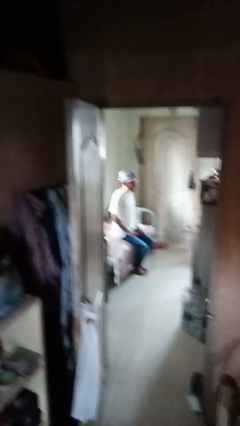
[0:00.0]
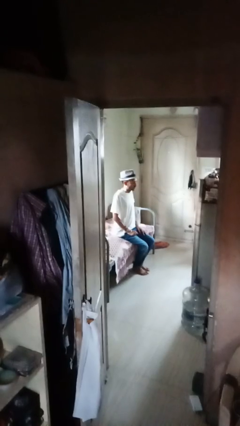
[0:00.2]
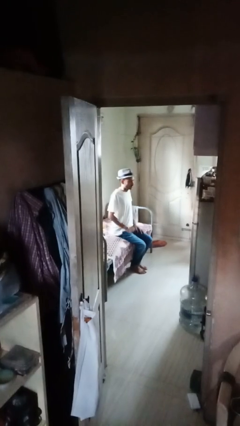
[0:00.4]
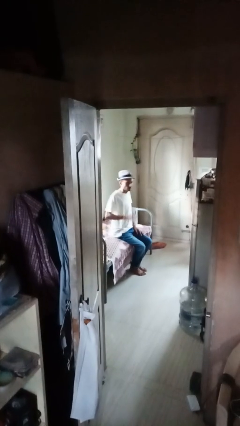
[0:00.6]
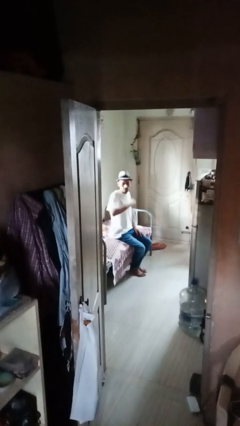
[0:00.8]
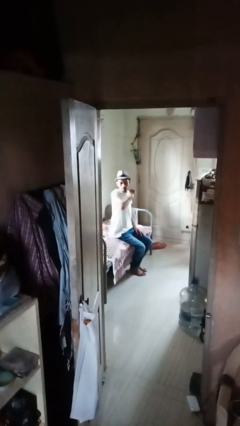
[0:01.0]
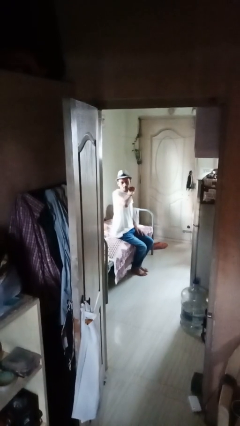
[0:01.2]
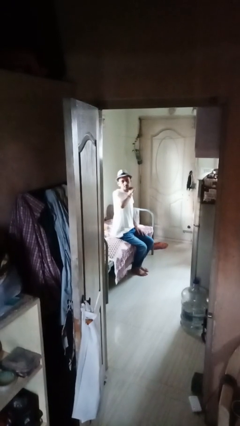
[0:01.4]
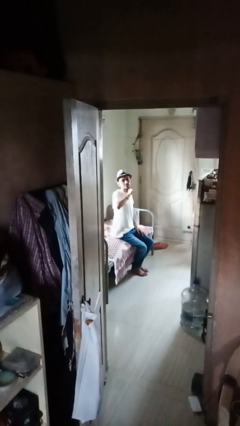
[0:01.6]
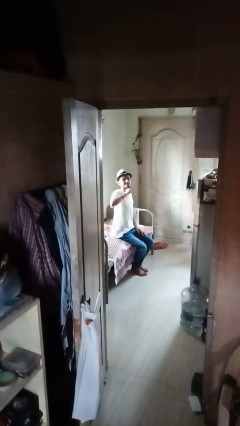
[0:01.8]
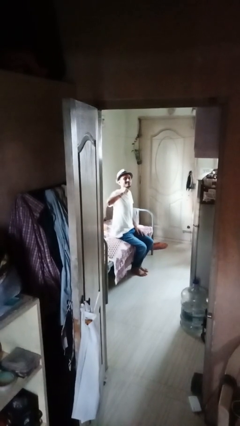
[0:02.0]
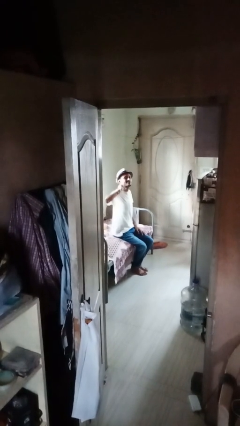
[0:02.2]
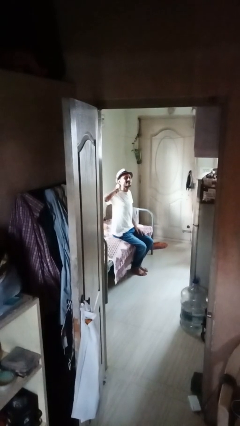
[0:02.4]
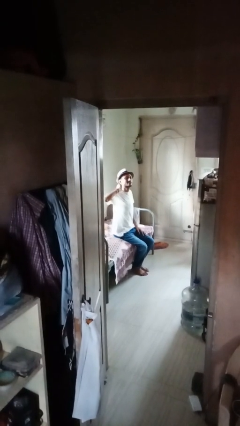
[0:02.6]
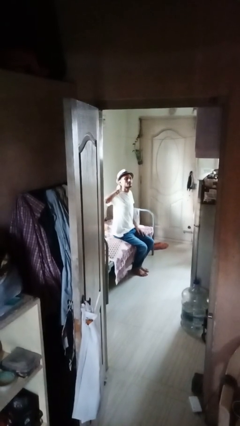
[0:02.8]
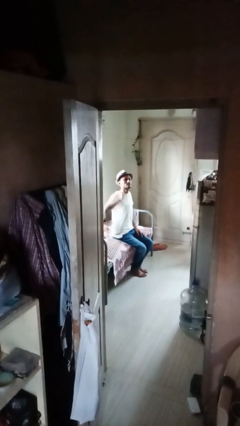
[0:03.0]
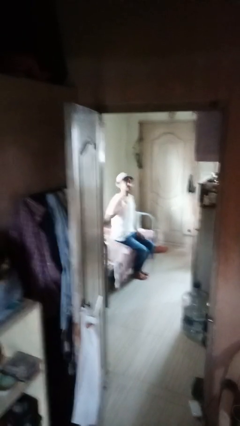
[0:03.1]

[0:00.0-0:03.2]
person gestures cut

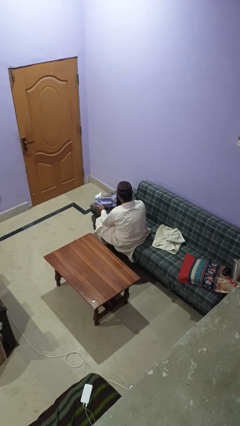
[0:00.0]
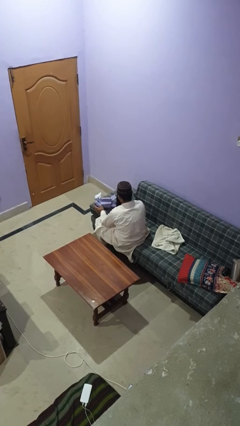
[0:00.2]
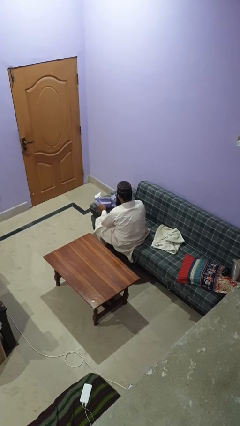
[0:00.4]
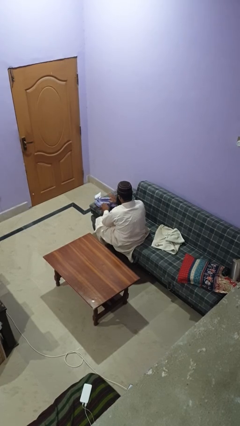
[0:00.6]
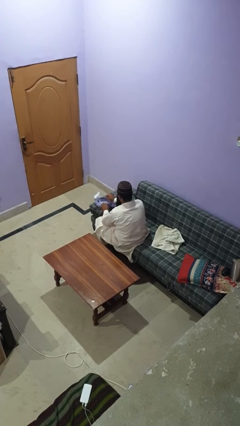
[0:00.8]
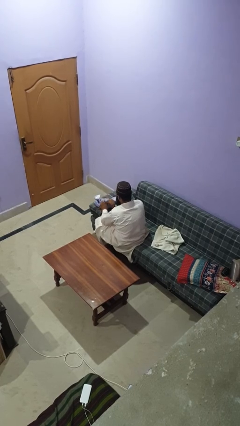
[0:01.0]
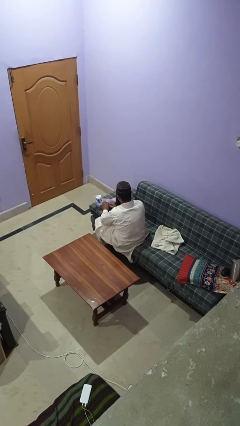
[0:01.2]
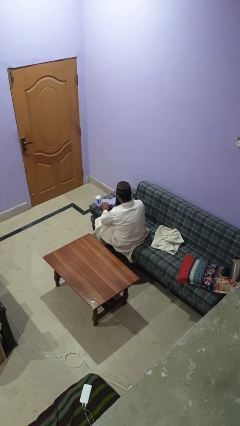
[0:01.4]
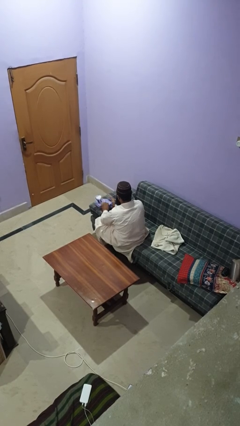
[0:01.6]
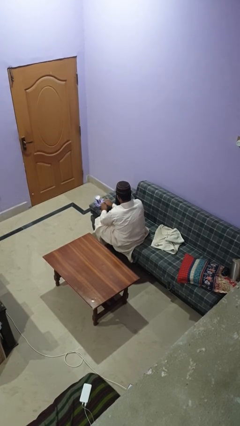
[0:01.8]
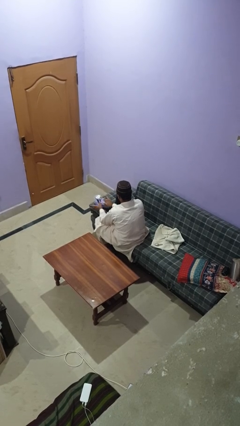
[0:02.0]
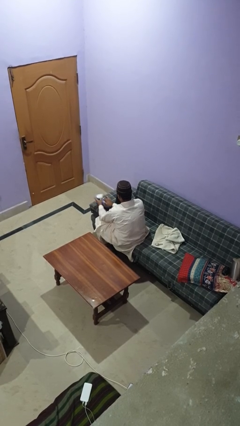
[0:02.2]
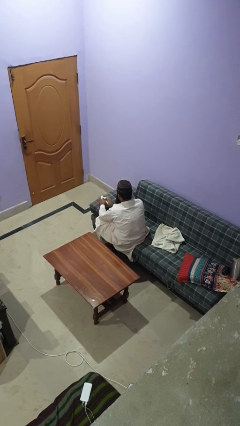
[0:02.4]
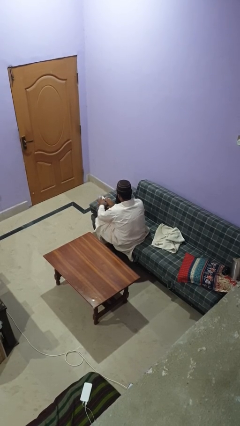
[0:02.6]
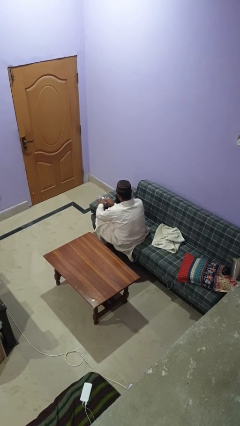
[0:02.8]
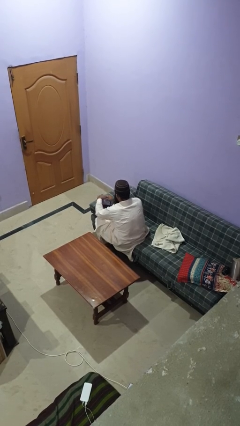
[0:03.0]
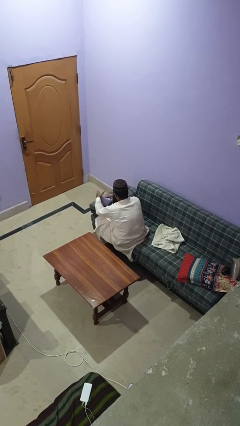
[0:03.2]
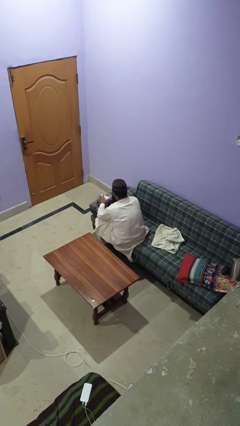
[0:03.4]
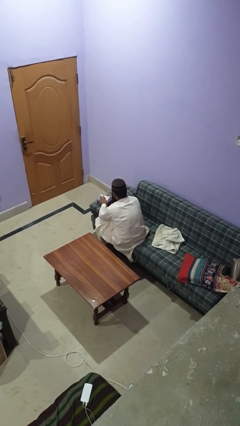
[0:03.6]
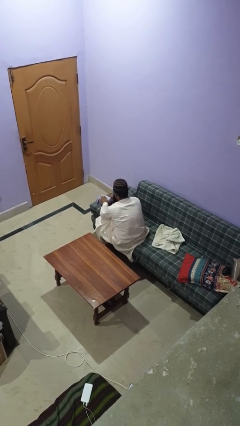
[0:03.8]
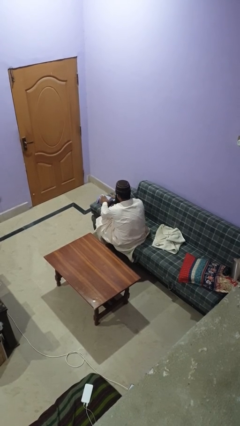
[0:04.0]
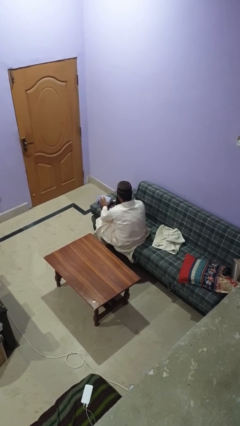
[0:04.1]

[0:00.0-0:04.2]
person wraps box

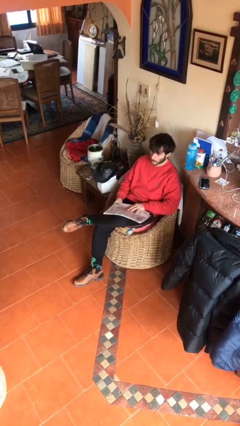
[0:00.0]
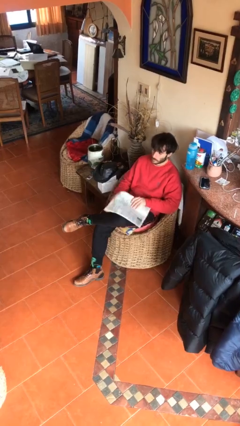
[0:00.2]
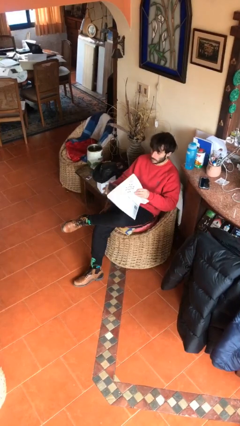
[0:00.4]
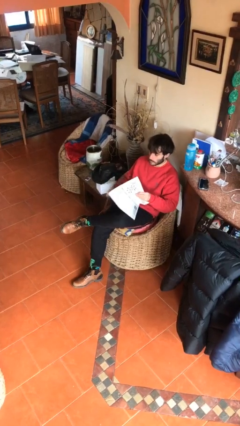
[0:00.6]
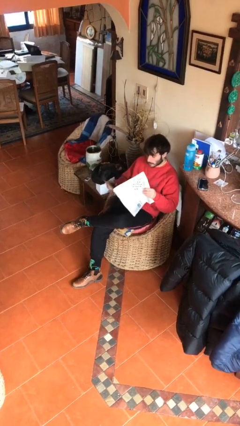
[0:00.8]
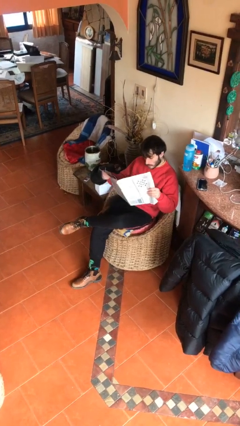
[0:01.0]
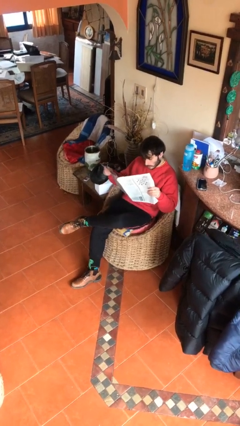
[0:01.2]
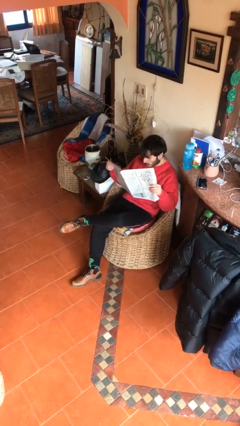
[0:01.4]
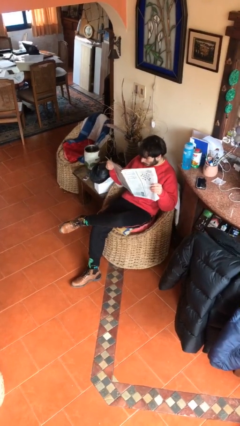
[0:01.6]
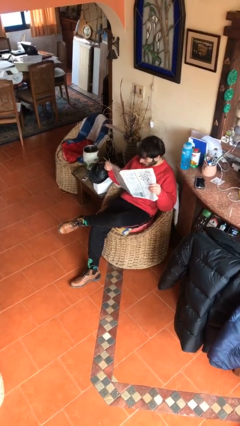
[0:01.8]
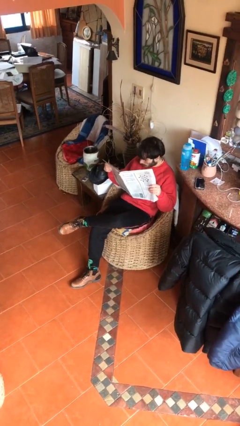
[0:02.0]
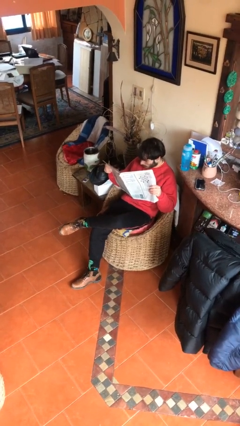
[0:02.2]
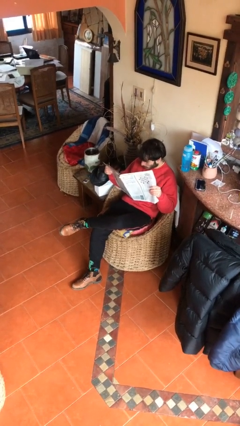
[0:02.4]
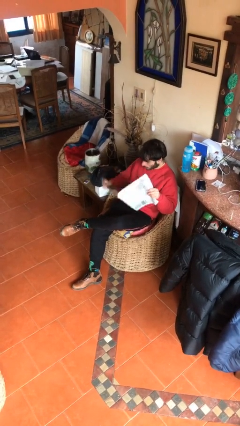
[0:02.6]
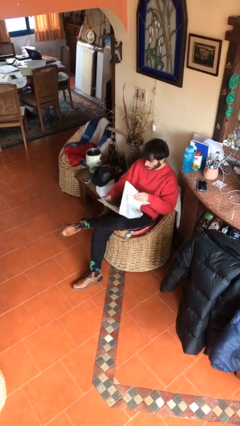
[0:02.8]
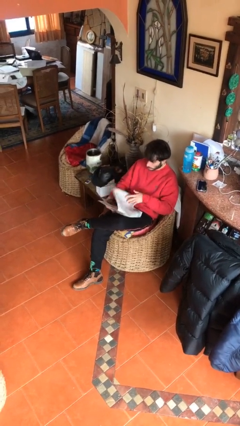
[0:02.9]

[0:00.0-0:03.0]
person reads newspaper

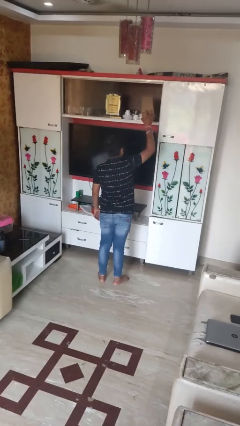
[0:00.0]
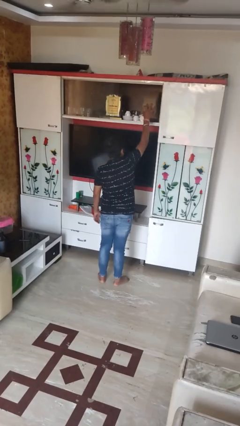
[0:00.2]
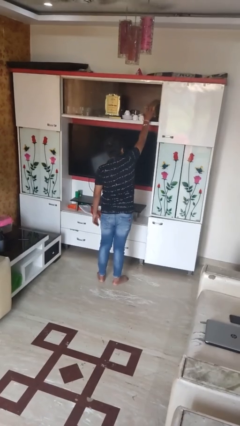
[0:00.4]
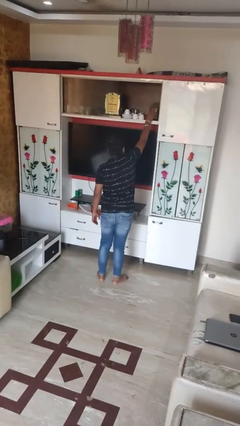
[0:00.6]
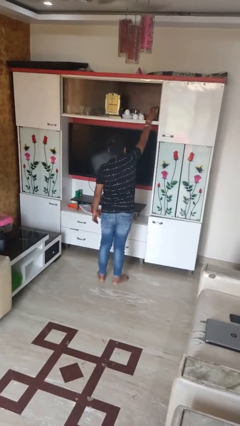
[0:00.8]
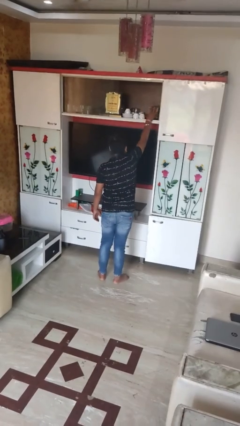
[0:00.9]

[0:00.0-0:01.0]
person puts down object on shelf

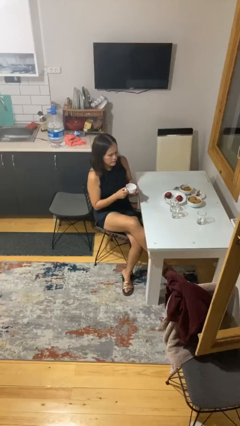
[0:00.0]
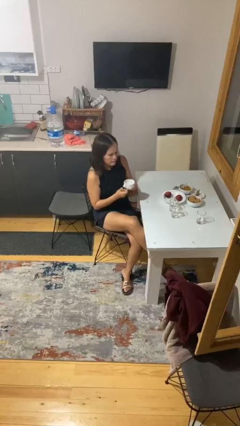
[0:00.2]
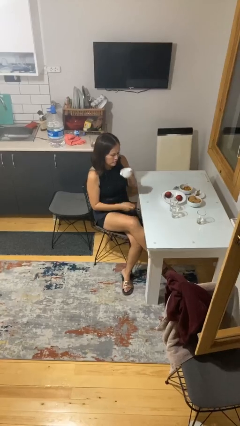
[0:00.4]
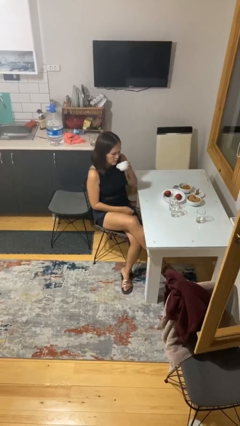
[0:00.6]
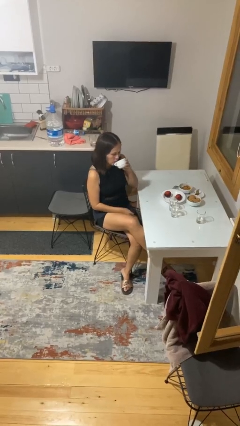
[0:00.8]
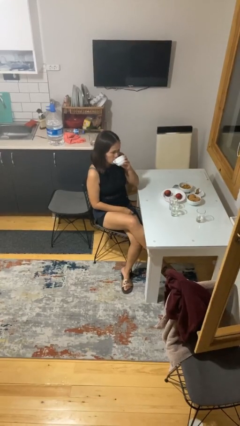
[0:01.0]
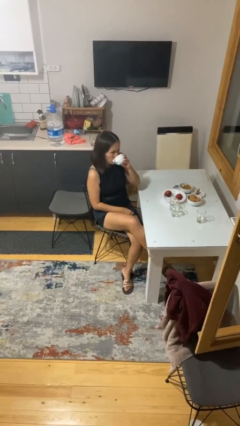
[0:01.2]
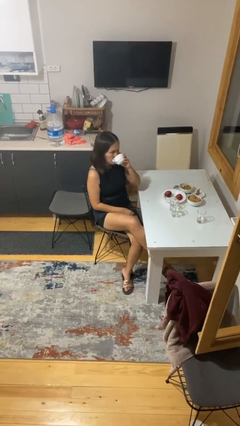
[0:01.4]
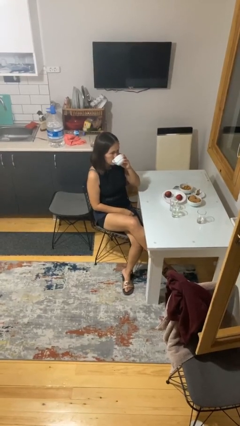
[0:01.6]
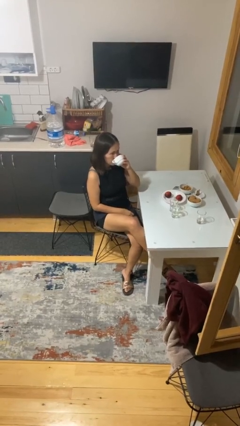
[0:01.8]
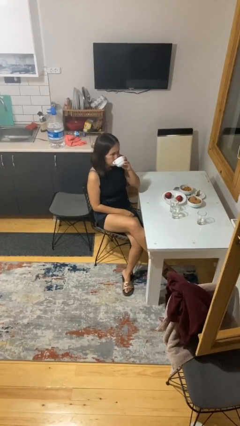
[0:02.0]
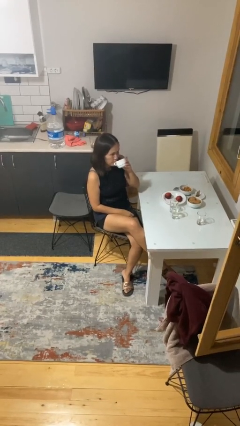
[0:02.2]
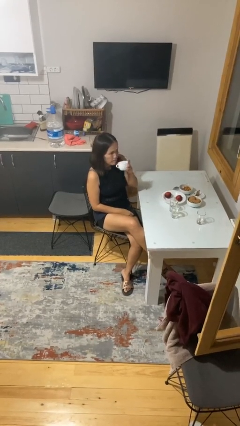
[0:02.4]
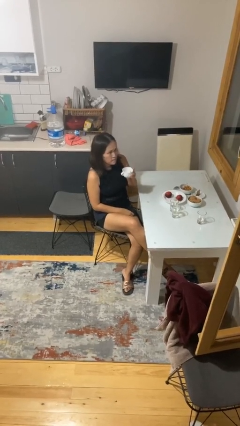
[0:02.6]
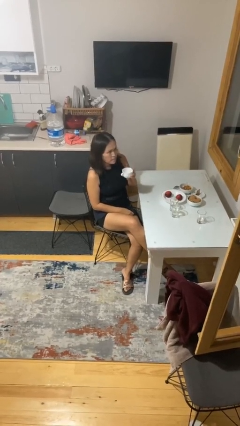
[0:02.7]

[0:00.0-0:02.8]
person drinks from mug

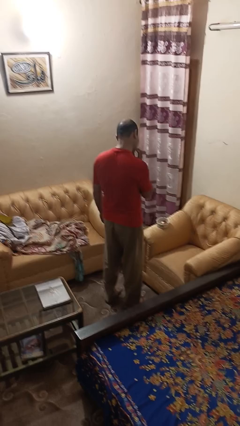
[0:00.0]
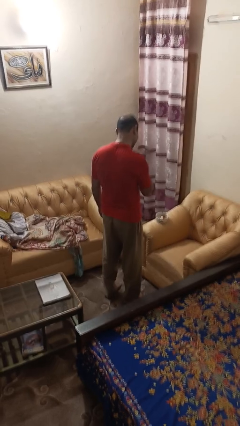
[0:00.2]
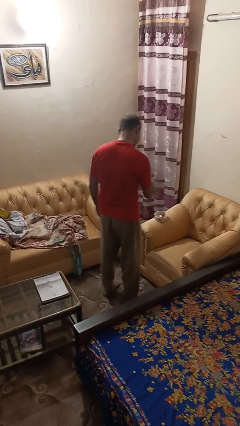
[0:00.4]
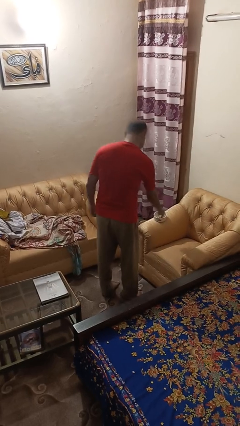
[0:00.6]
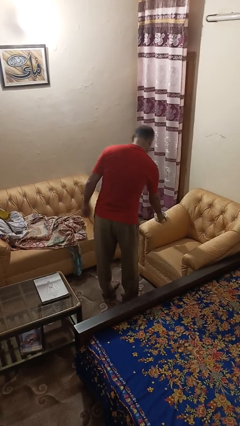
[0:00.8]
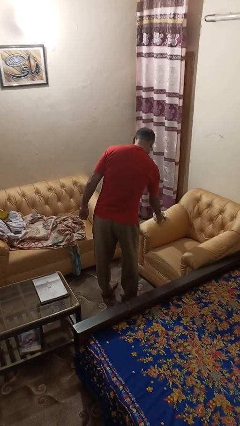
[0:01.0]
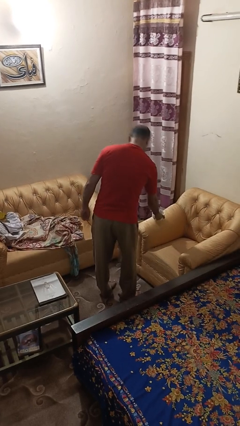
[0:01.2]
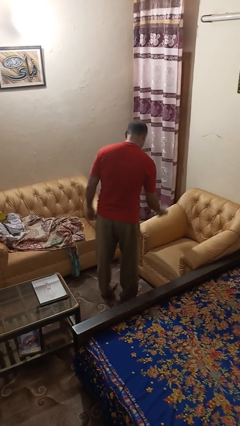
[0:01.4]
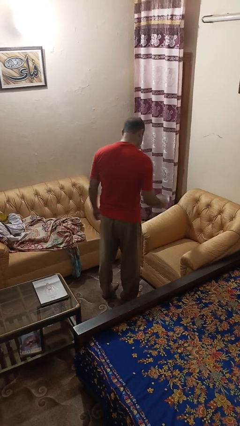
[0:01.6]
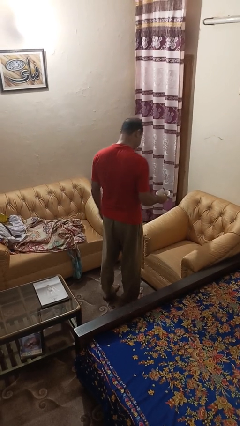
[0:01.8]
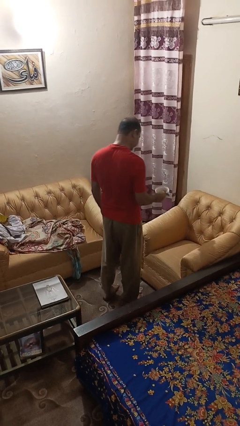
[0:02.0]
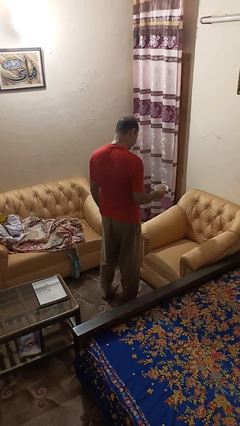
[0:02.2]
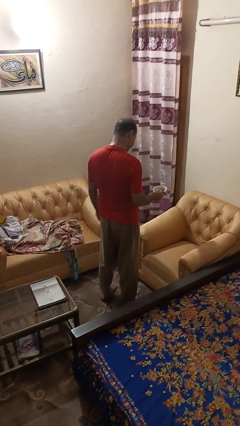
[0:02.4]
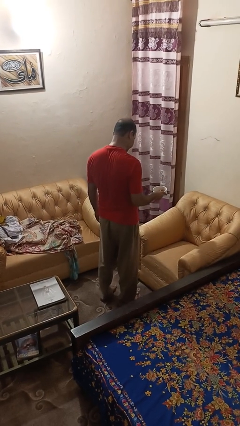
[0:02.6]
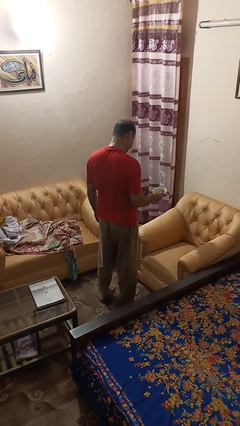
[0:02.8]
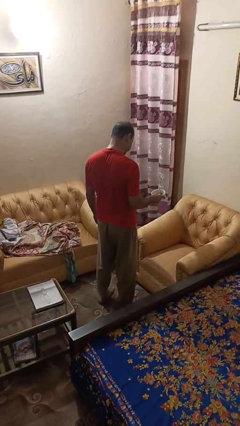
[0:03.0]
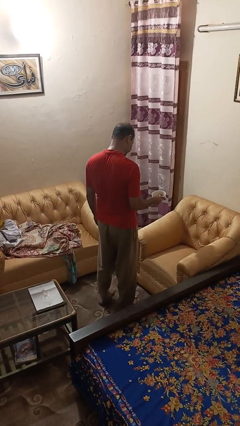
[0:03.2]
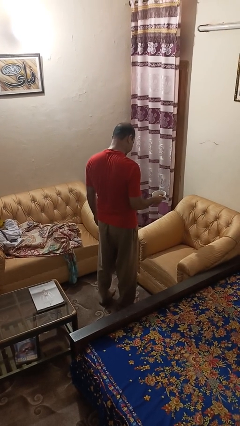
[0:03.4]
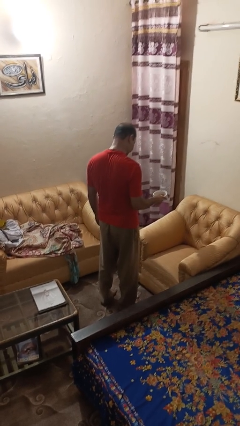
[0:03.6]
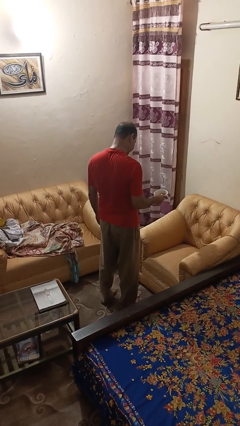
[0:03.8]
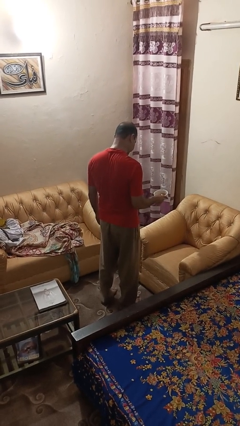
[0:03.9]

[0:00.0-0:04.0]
person picks up object from couch
